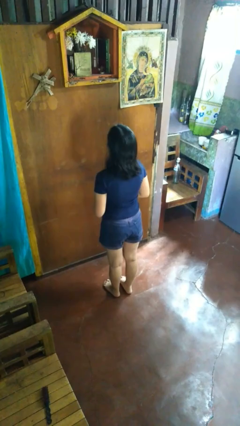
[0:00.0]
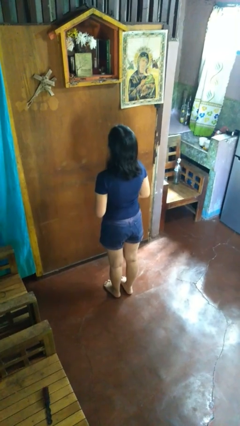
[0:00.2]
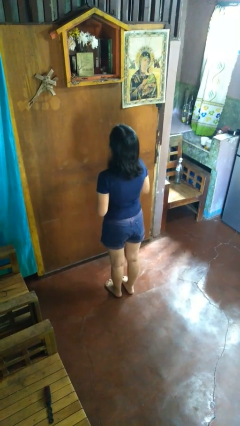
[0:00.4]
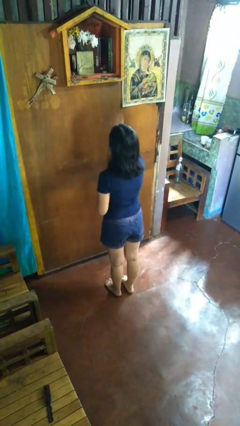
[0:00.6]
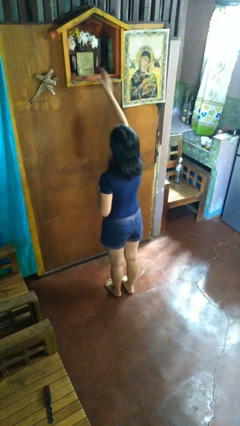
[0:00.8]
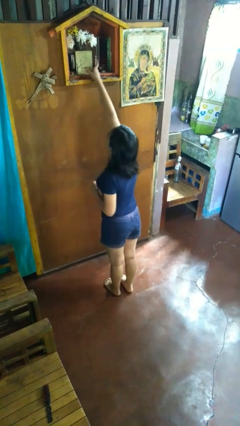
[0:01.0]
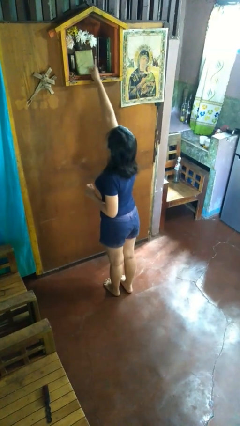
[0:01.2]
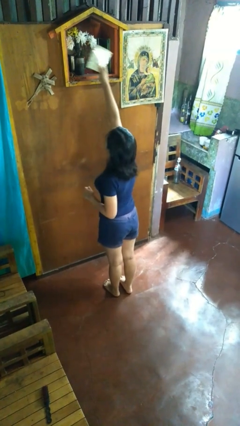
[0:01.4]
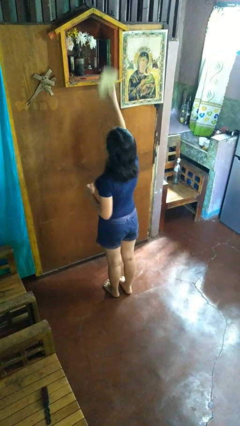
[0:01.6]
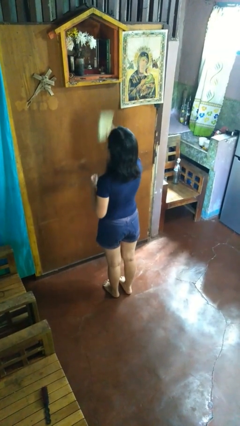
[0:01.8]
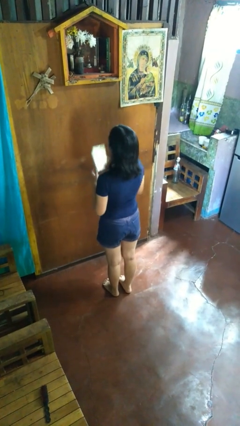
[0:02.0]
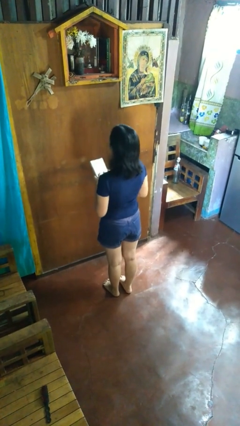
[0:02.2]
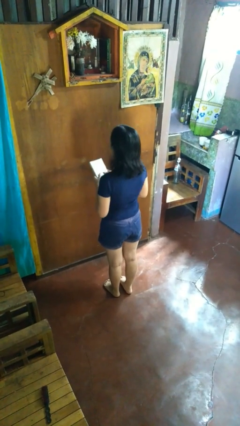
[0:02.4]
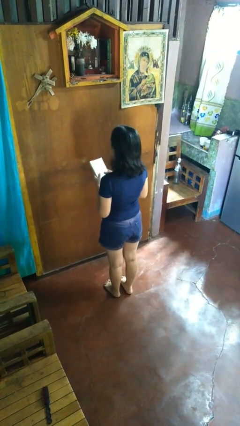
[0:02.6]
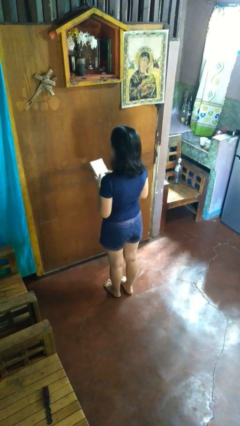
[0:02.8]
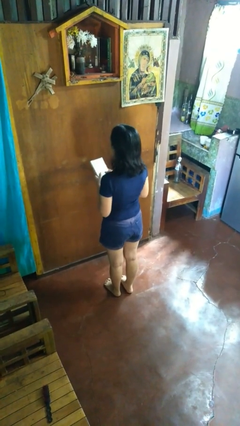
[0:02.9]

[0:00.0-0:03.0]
person picks up object from shelf

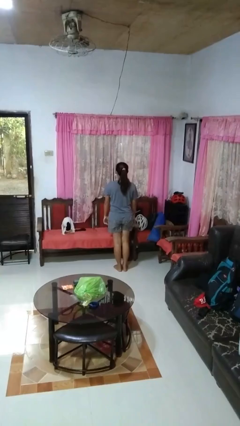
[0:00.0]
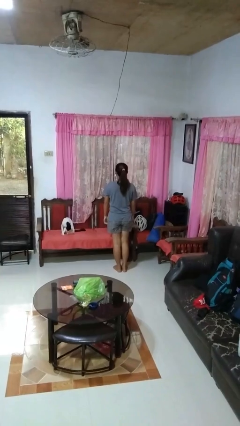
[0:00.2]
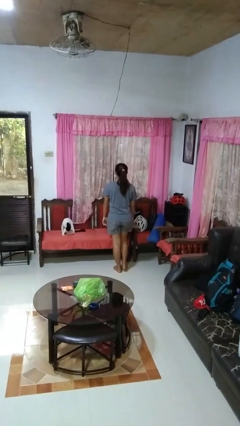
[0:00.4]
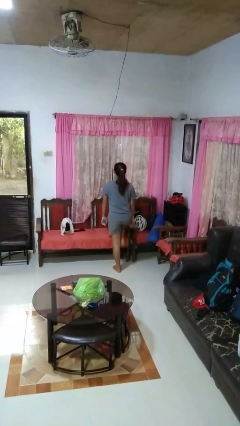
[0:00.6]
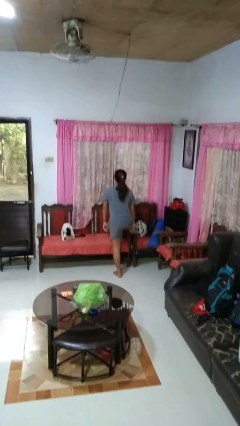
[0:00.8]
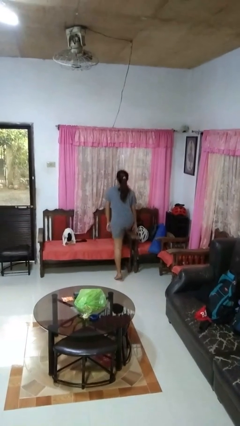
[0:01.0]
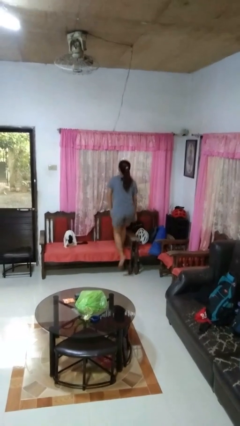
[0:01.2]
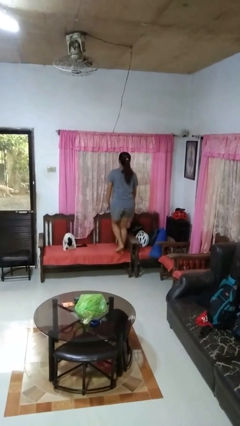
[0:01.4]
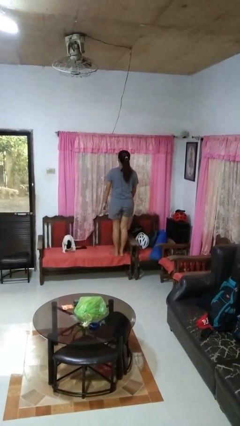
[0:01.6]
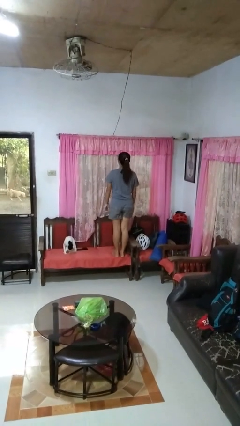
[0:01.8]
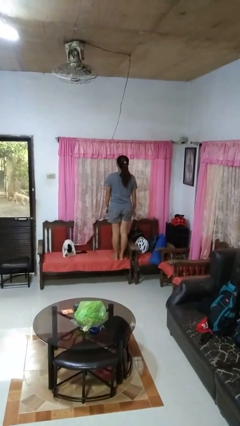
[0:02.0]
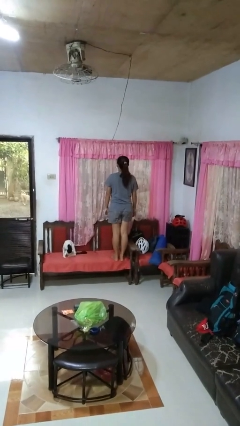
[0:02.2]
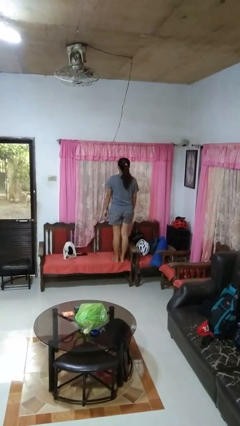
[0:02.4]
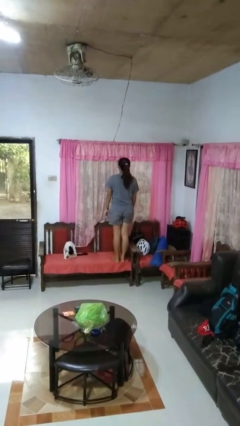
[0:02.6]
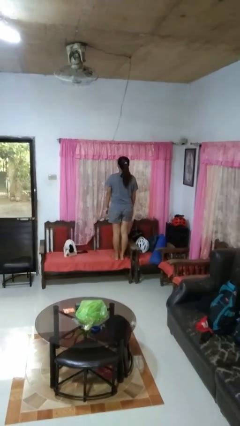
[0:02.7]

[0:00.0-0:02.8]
person climbs on chair

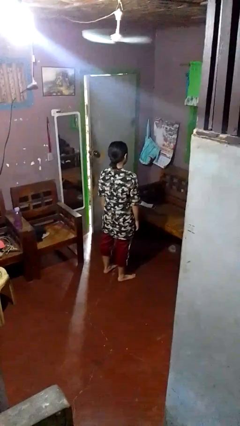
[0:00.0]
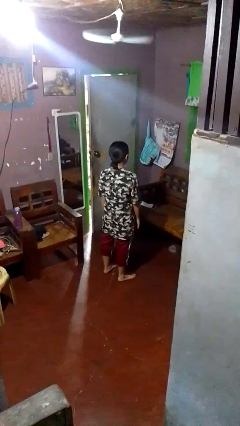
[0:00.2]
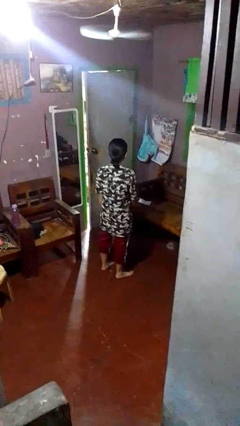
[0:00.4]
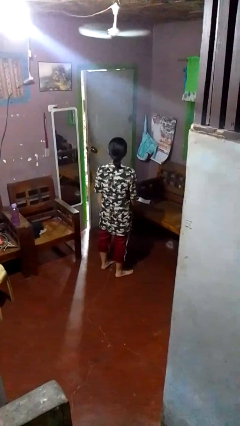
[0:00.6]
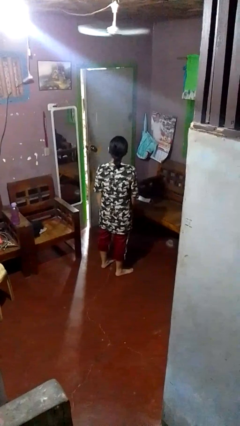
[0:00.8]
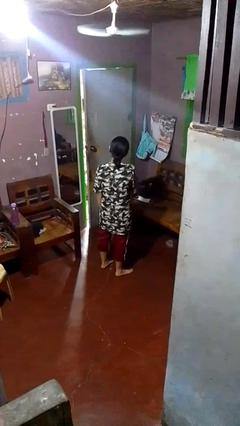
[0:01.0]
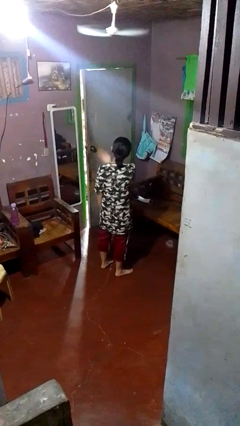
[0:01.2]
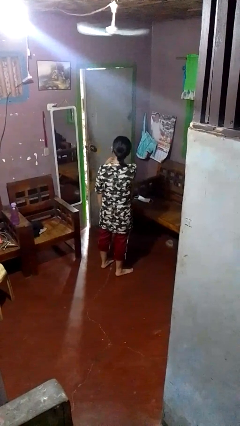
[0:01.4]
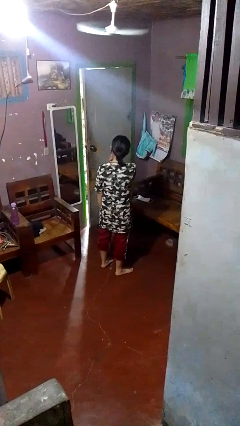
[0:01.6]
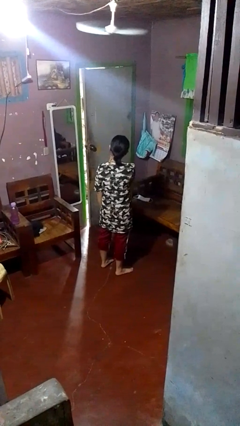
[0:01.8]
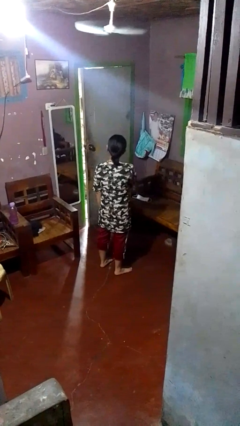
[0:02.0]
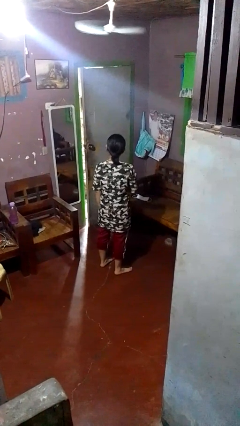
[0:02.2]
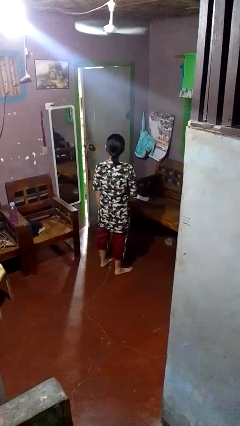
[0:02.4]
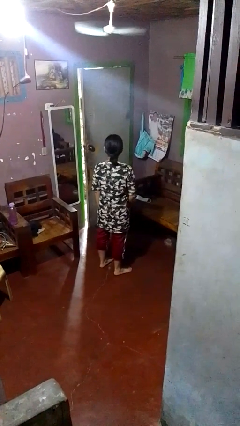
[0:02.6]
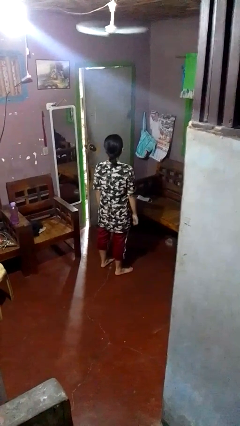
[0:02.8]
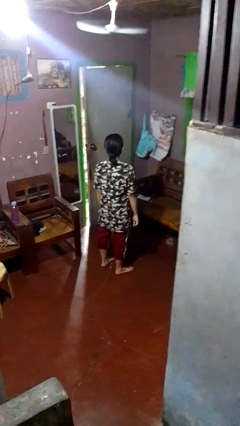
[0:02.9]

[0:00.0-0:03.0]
person swats bug

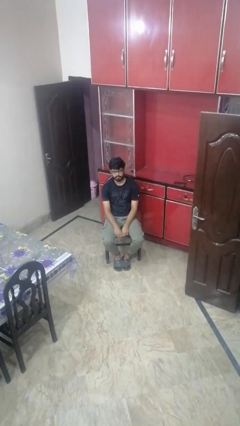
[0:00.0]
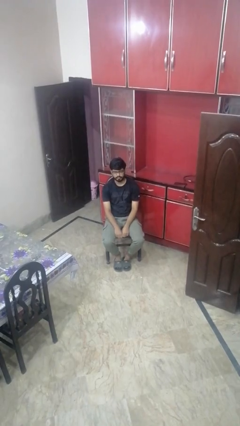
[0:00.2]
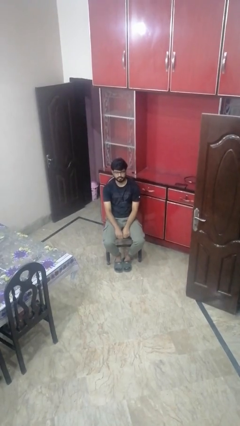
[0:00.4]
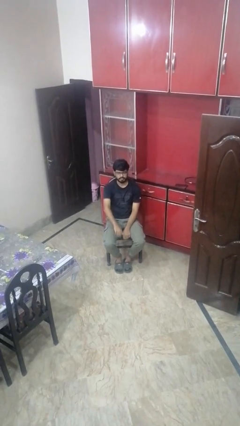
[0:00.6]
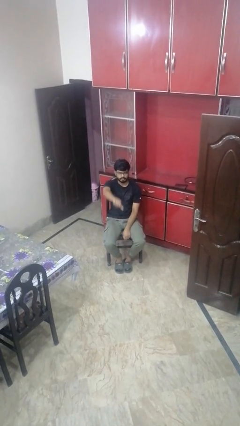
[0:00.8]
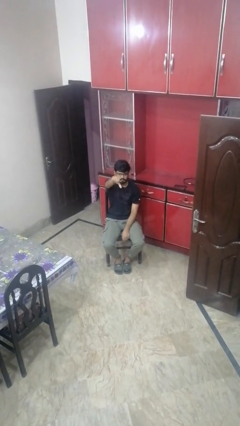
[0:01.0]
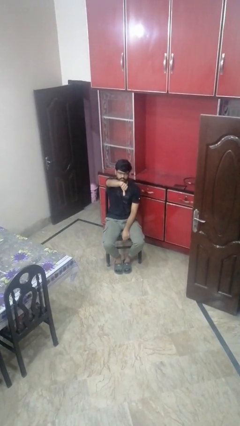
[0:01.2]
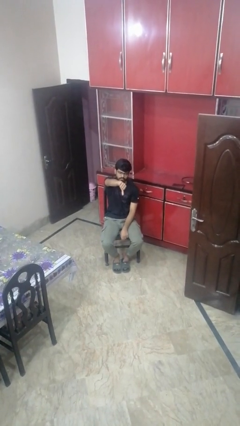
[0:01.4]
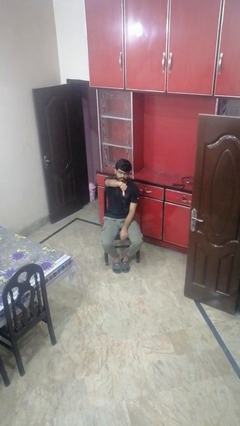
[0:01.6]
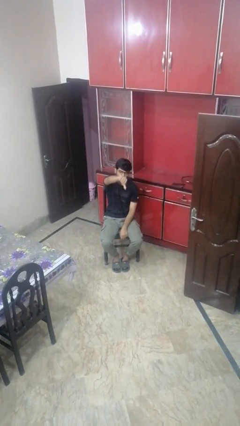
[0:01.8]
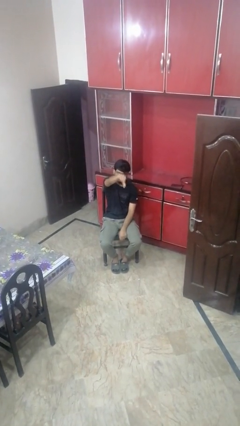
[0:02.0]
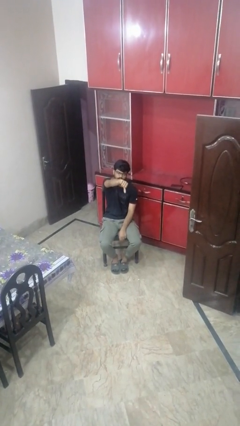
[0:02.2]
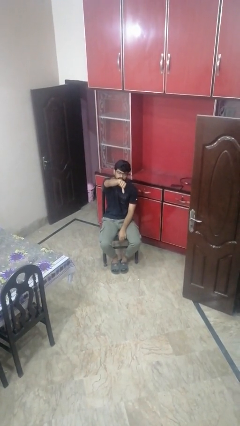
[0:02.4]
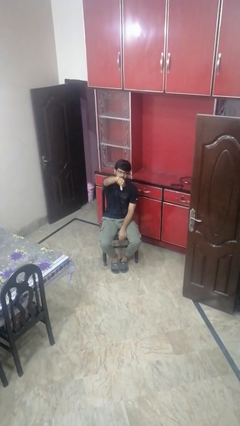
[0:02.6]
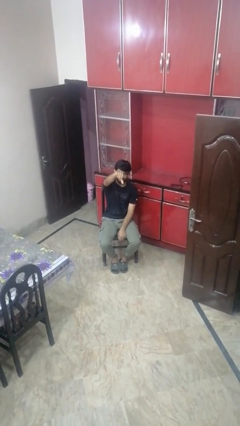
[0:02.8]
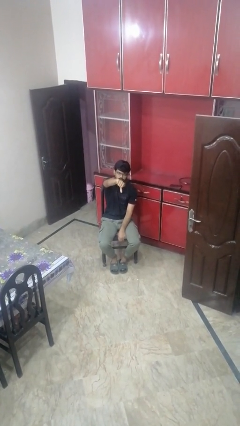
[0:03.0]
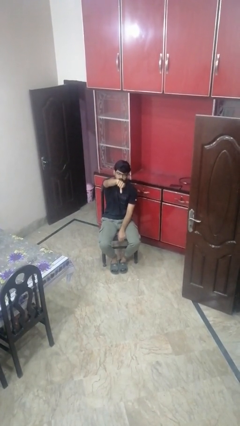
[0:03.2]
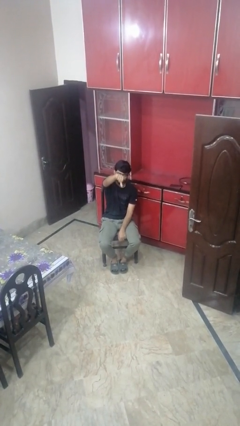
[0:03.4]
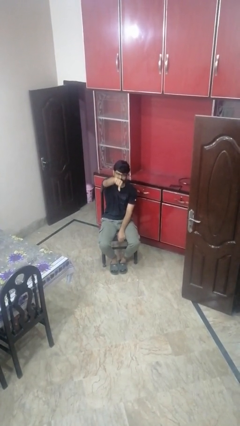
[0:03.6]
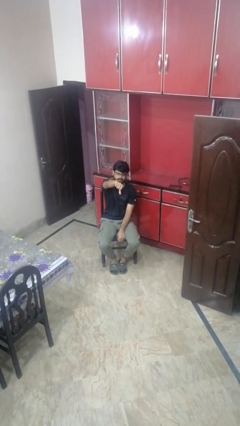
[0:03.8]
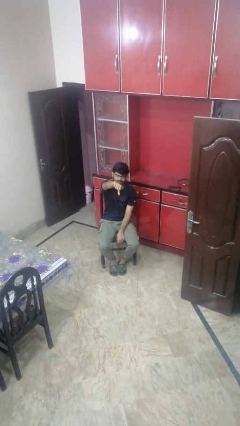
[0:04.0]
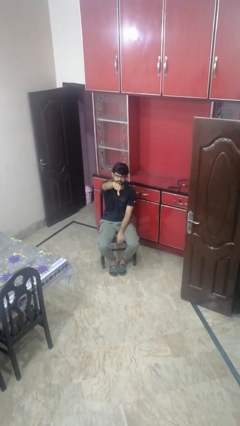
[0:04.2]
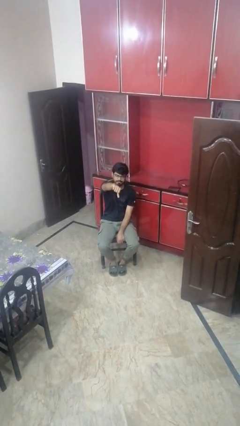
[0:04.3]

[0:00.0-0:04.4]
person gestures thumbs down

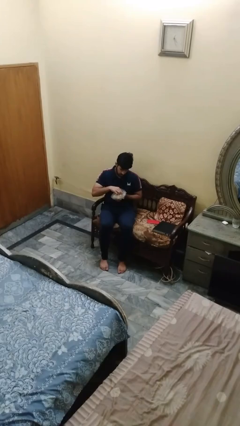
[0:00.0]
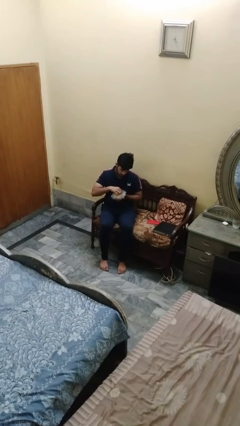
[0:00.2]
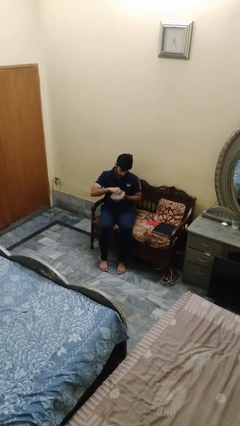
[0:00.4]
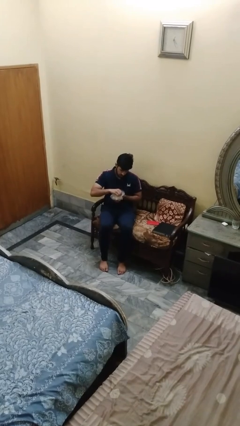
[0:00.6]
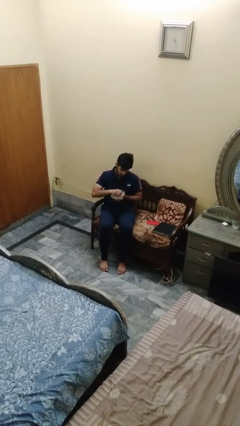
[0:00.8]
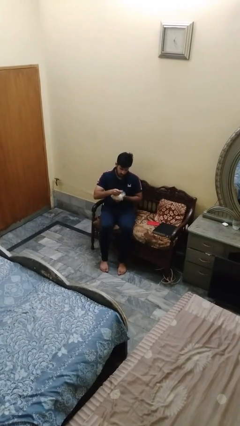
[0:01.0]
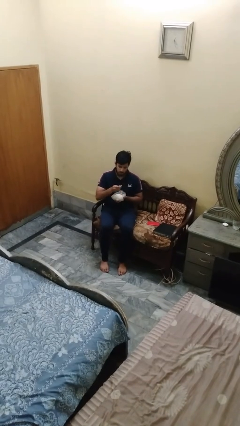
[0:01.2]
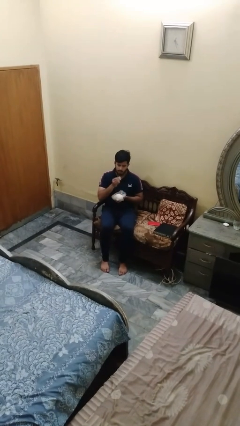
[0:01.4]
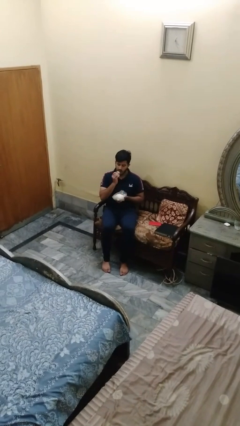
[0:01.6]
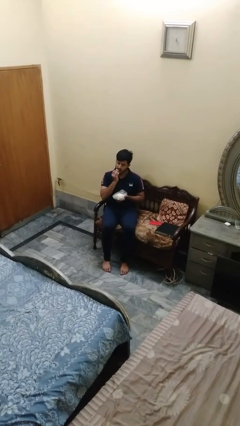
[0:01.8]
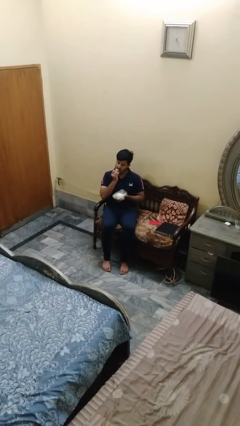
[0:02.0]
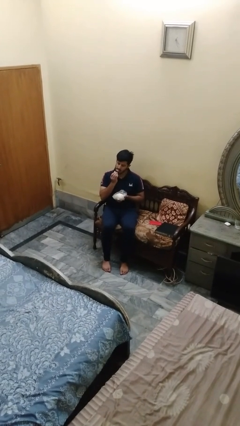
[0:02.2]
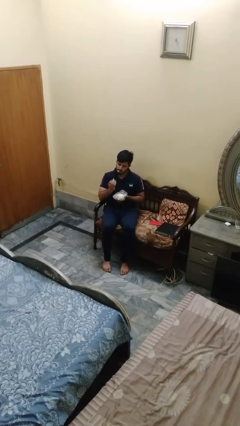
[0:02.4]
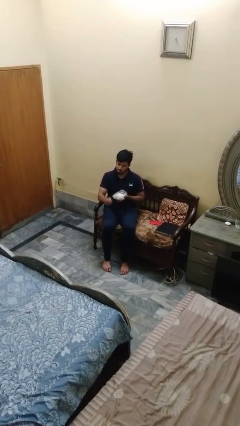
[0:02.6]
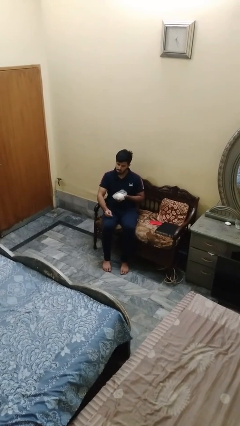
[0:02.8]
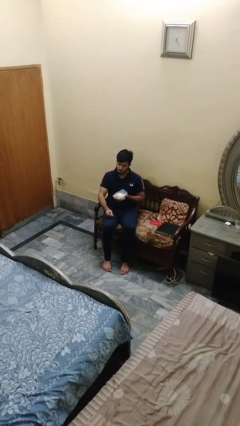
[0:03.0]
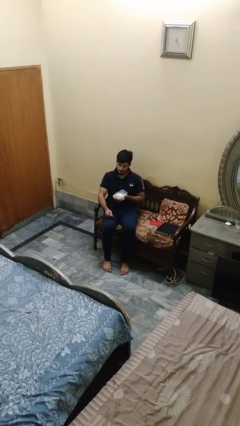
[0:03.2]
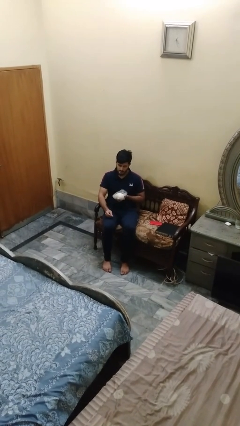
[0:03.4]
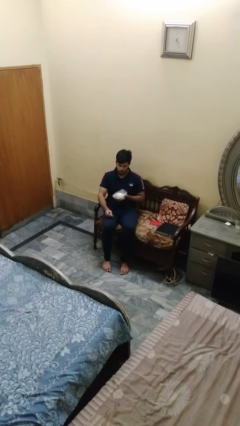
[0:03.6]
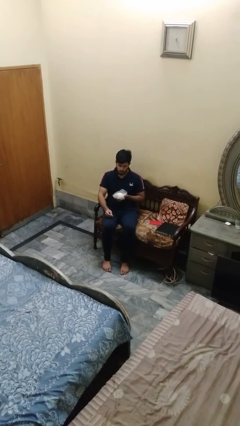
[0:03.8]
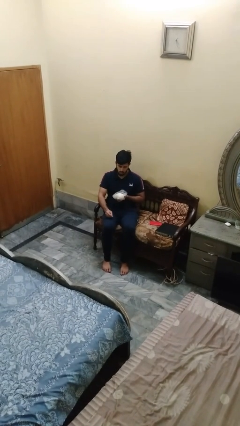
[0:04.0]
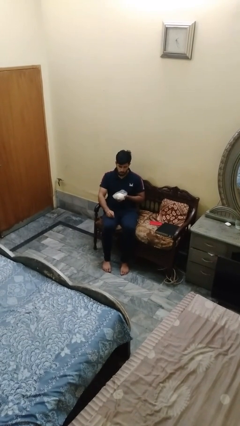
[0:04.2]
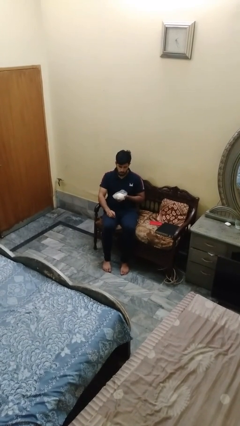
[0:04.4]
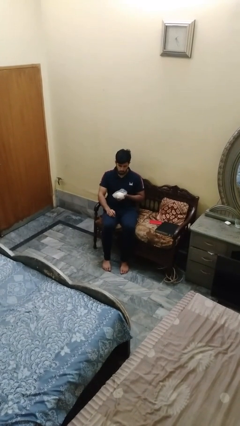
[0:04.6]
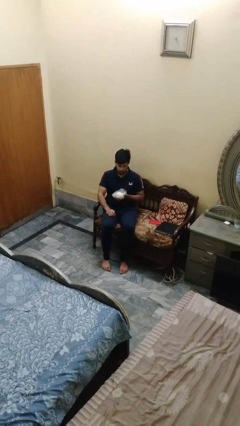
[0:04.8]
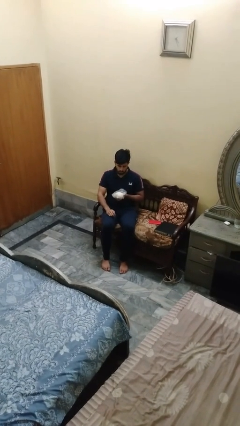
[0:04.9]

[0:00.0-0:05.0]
person eats snack from bag
